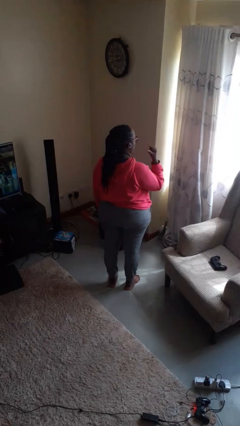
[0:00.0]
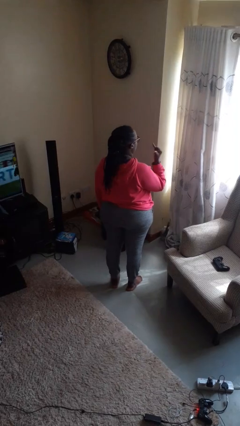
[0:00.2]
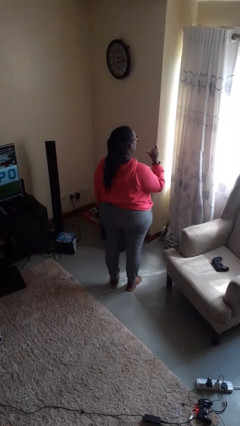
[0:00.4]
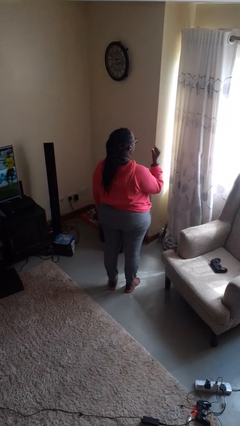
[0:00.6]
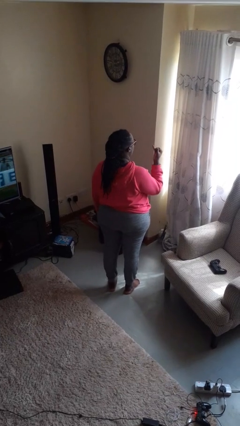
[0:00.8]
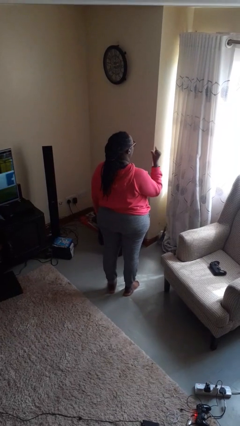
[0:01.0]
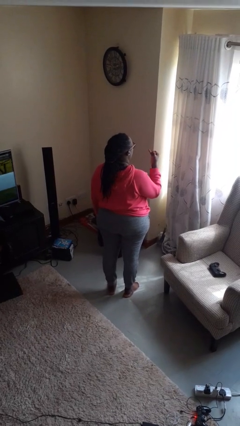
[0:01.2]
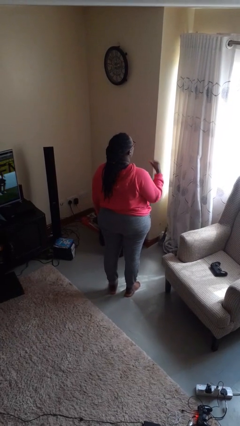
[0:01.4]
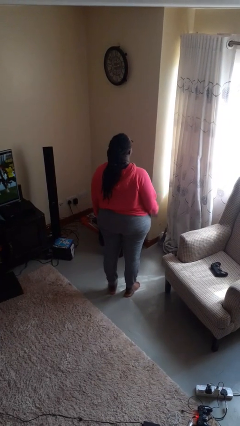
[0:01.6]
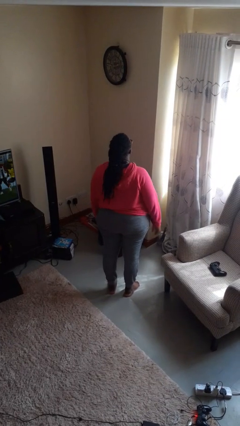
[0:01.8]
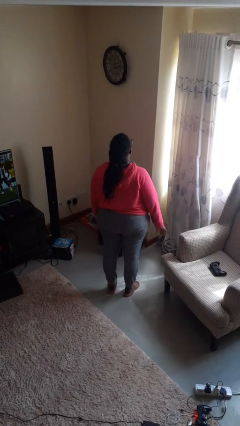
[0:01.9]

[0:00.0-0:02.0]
person gestures hang loose

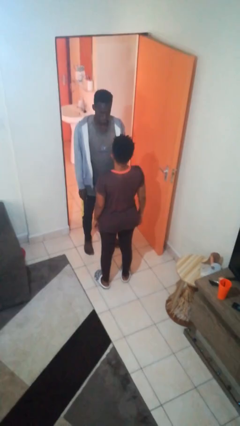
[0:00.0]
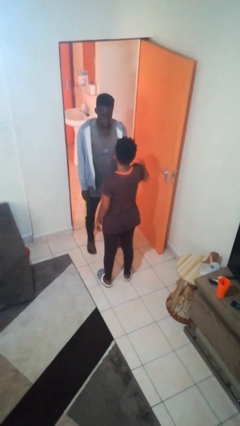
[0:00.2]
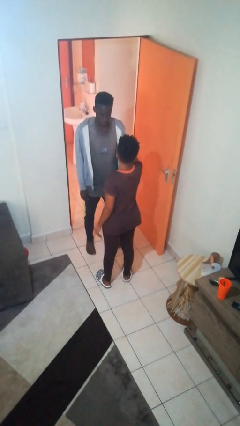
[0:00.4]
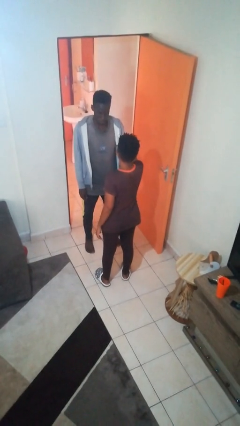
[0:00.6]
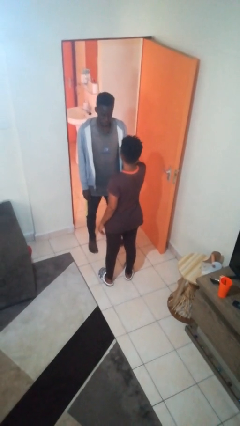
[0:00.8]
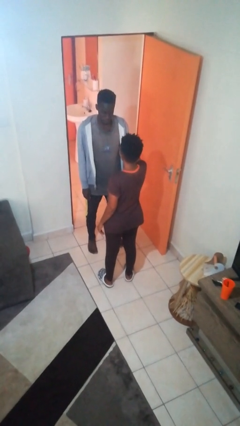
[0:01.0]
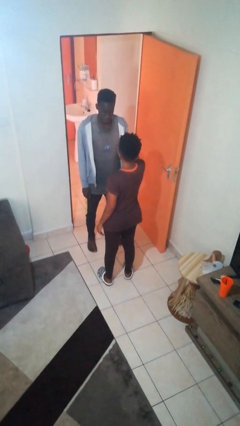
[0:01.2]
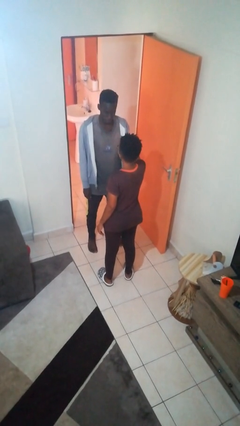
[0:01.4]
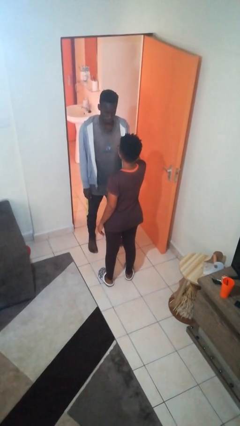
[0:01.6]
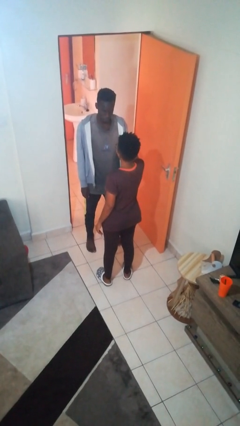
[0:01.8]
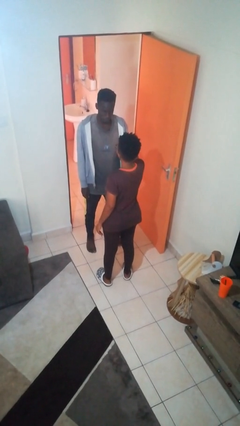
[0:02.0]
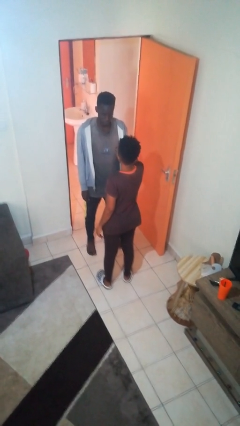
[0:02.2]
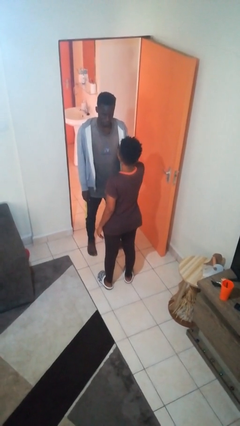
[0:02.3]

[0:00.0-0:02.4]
person grabs person by bicep

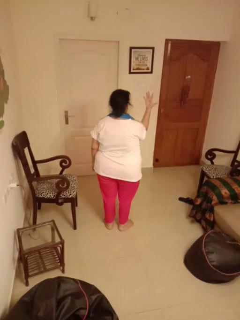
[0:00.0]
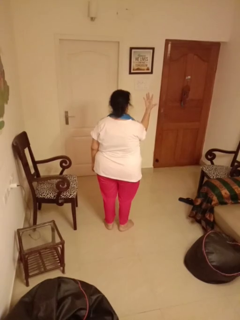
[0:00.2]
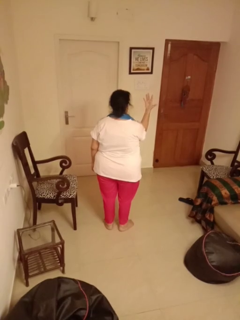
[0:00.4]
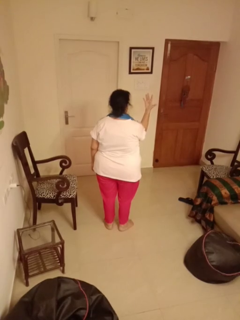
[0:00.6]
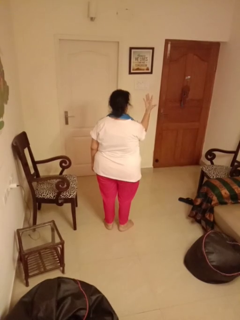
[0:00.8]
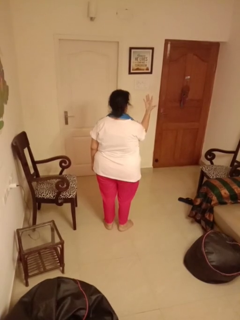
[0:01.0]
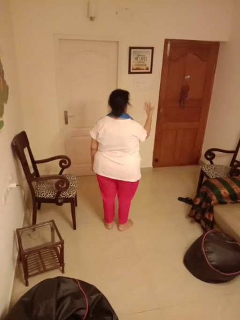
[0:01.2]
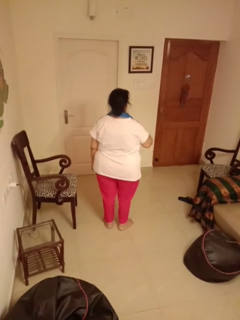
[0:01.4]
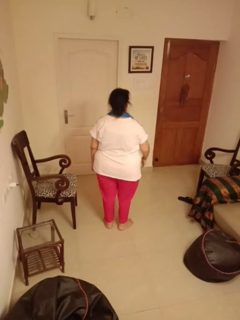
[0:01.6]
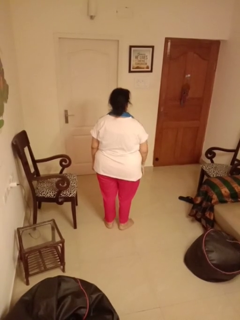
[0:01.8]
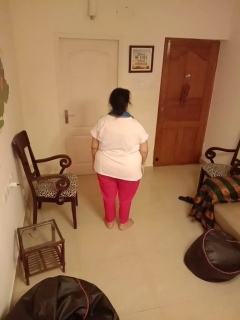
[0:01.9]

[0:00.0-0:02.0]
person gestures number five

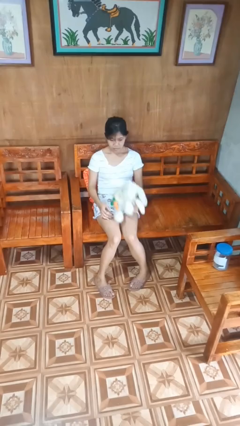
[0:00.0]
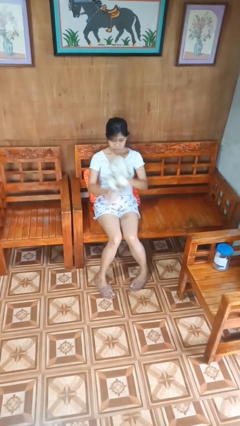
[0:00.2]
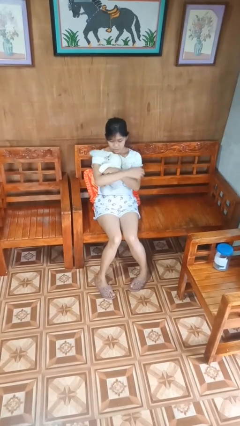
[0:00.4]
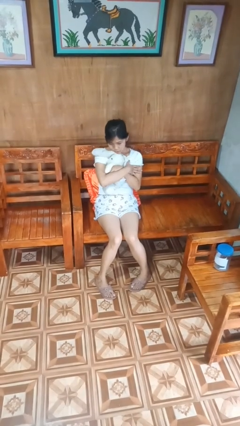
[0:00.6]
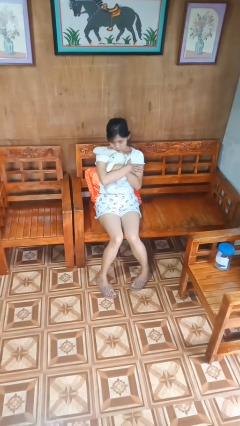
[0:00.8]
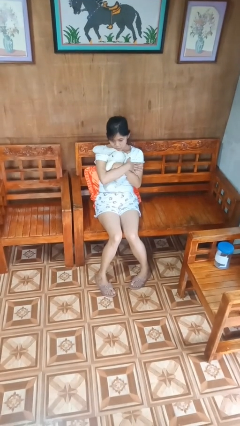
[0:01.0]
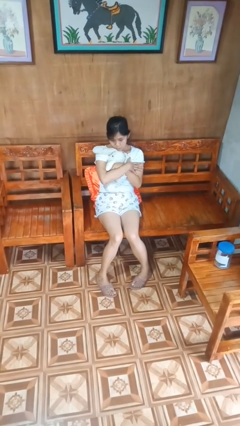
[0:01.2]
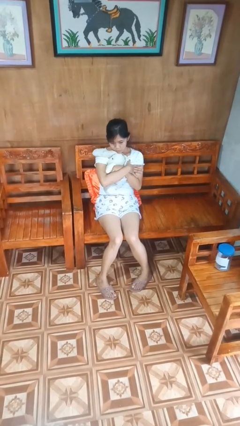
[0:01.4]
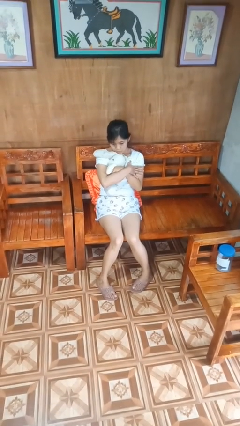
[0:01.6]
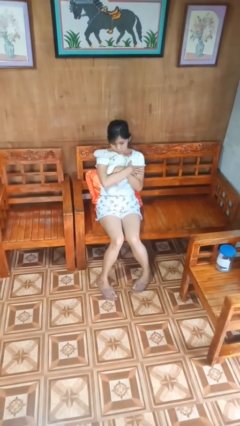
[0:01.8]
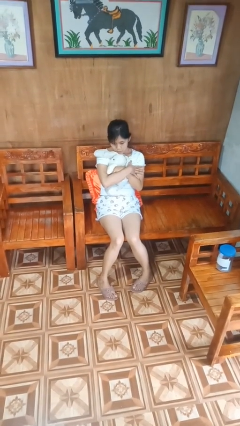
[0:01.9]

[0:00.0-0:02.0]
person hugs stuffed animal

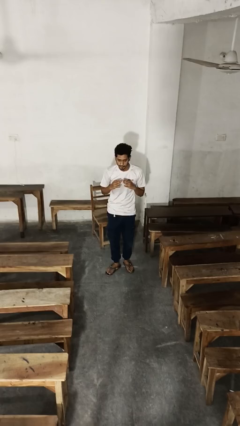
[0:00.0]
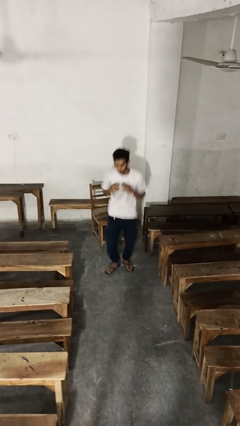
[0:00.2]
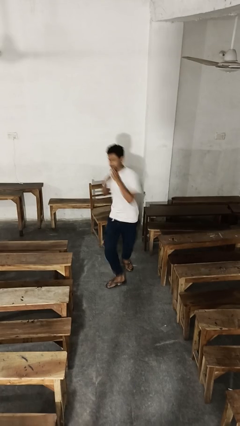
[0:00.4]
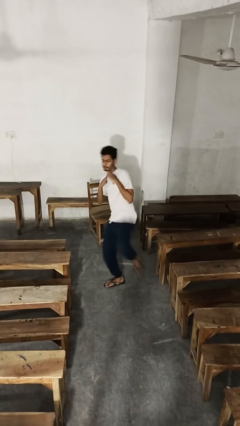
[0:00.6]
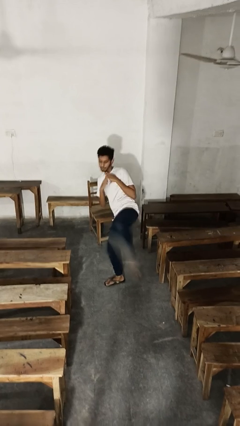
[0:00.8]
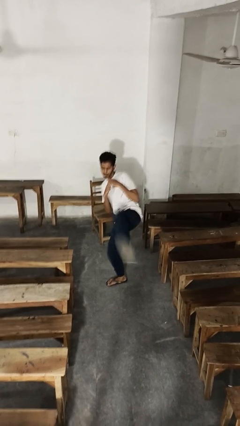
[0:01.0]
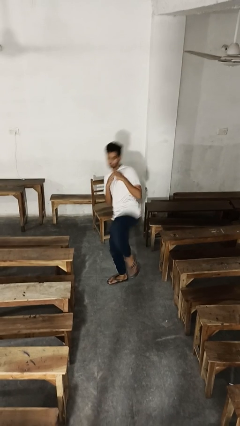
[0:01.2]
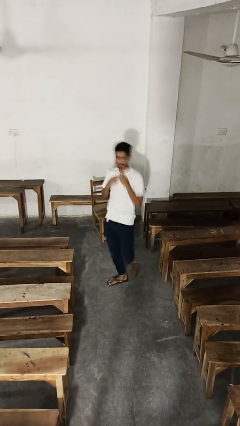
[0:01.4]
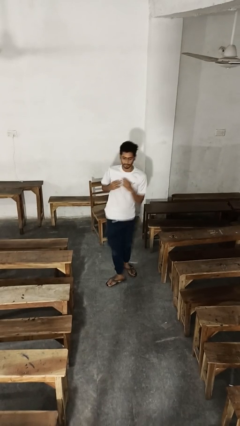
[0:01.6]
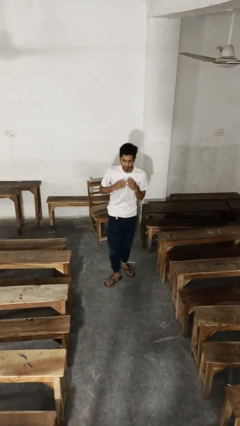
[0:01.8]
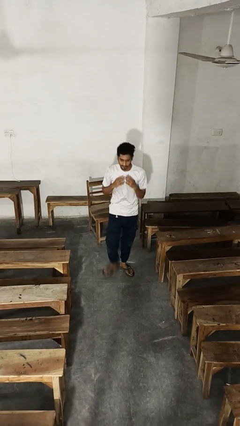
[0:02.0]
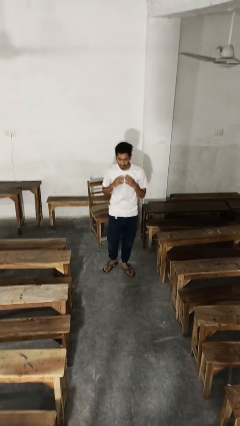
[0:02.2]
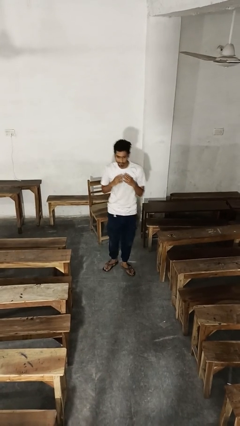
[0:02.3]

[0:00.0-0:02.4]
person karate kicks

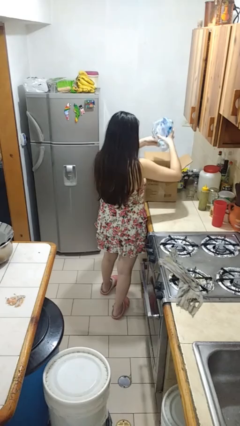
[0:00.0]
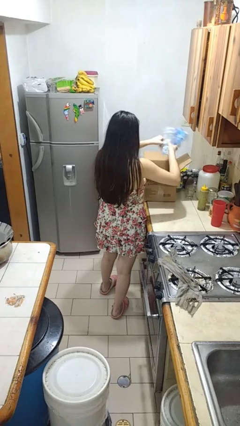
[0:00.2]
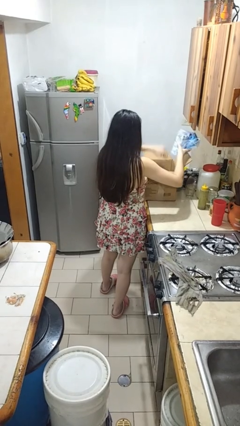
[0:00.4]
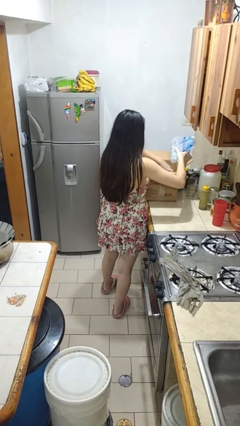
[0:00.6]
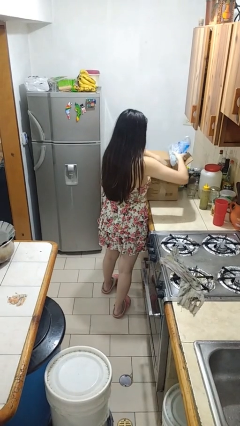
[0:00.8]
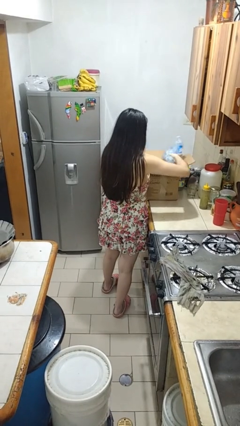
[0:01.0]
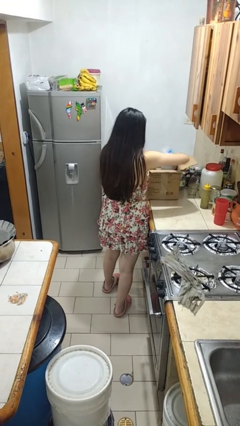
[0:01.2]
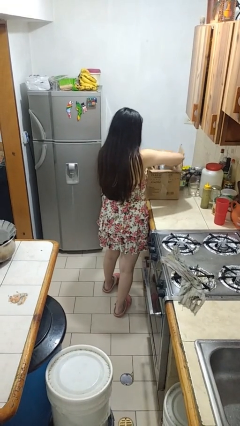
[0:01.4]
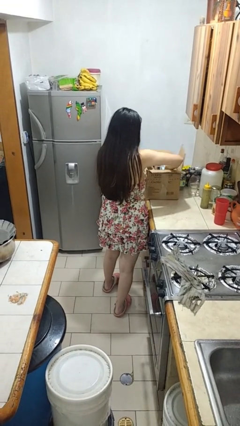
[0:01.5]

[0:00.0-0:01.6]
person puts object into box

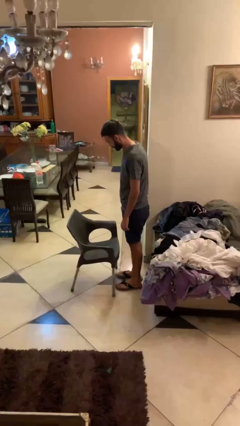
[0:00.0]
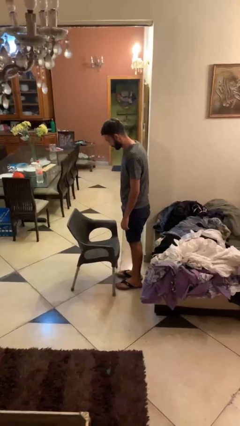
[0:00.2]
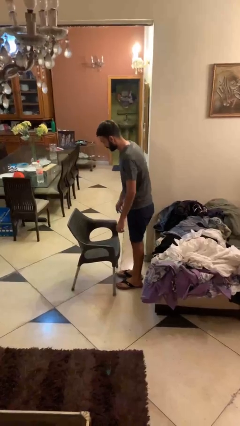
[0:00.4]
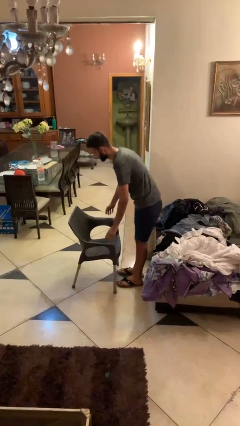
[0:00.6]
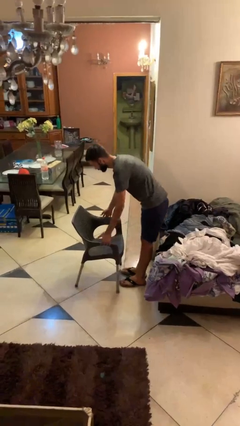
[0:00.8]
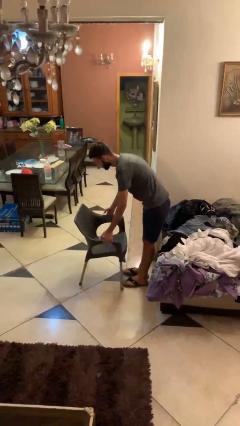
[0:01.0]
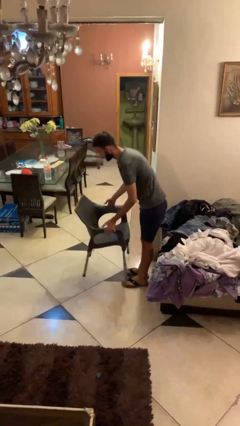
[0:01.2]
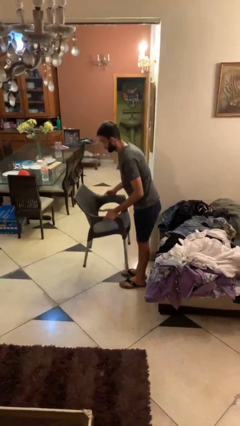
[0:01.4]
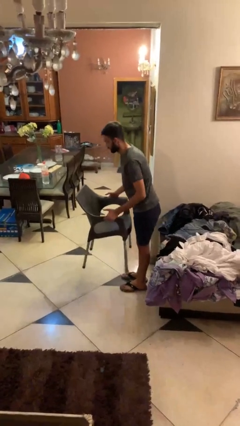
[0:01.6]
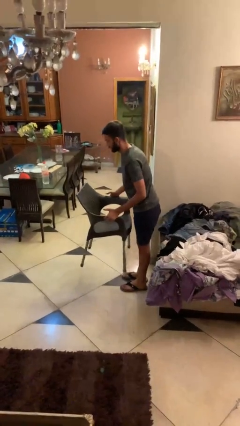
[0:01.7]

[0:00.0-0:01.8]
person picks up object from floor

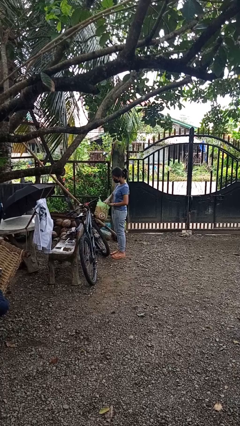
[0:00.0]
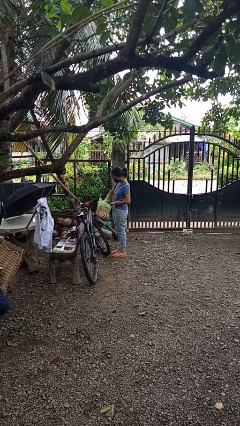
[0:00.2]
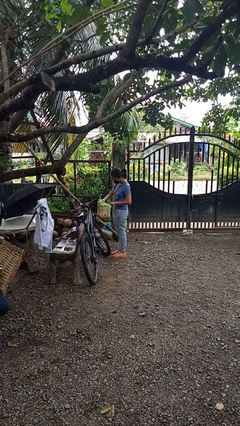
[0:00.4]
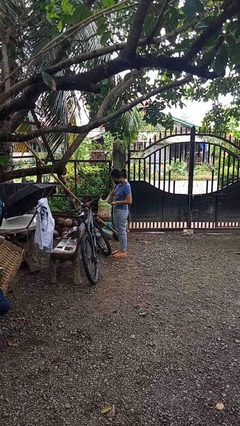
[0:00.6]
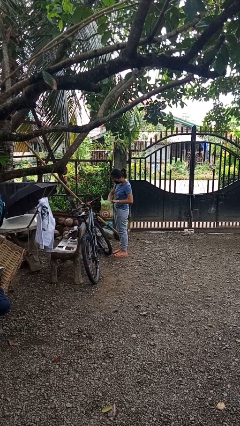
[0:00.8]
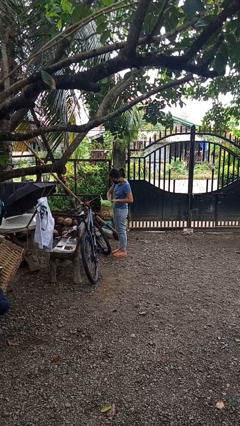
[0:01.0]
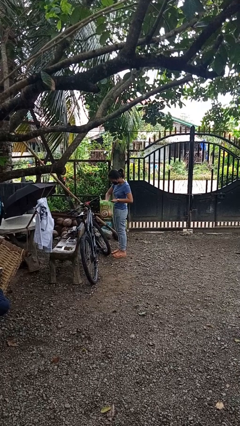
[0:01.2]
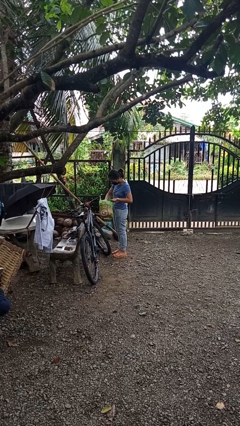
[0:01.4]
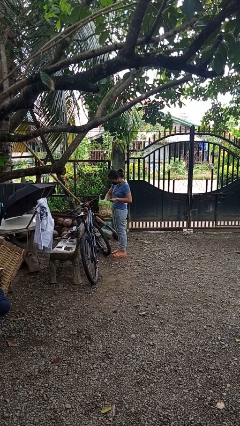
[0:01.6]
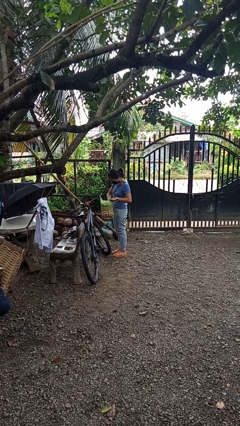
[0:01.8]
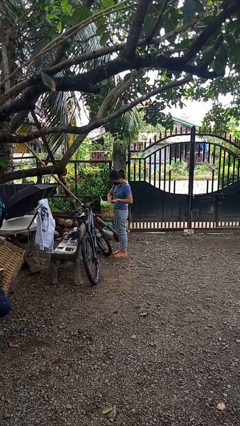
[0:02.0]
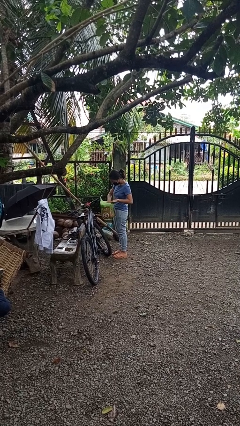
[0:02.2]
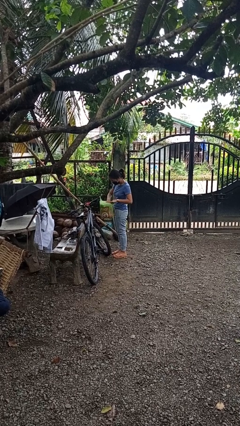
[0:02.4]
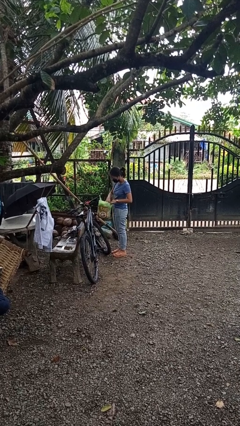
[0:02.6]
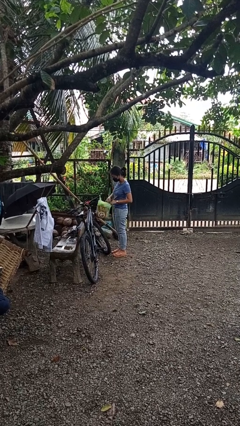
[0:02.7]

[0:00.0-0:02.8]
person searches in bag

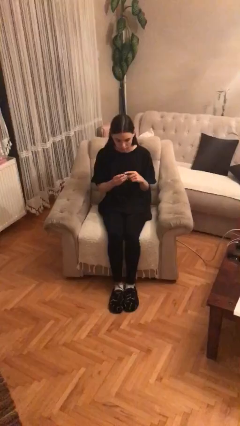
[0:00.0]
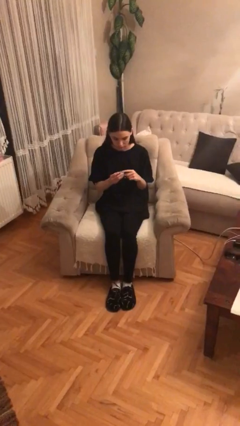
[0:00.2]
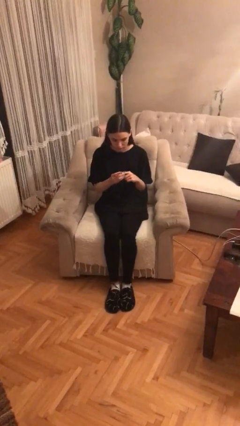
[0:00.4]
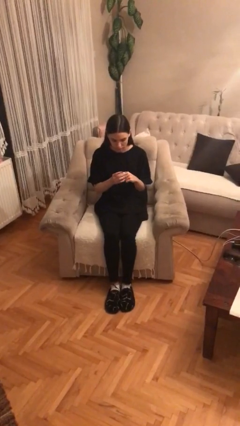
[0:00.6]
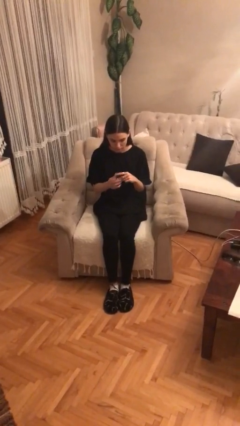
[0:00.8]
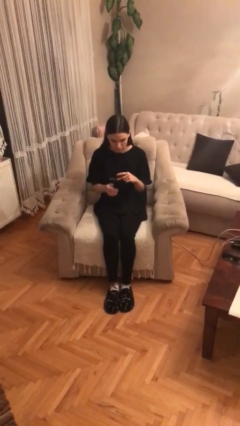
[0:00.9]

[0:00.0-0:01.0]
person puts on ring
